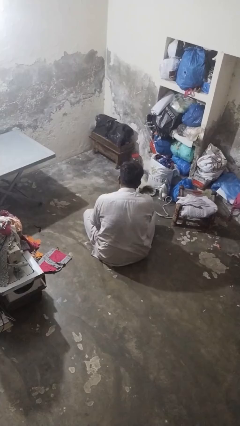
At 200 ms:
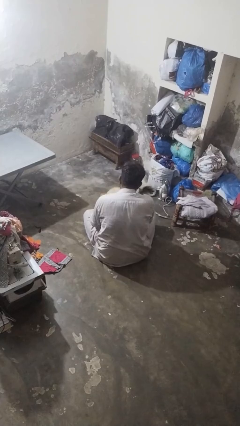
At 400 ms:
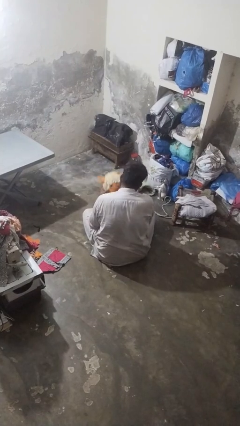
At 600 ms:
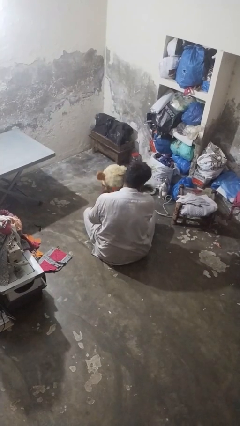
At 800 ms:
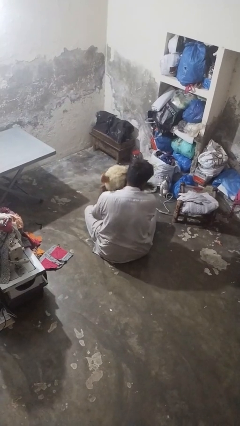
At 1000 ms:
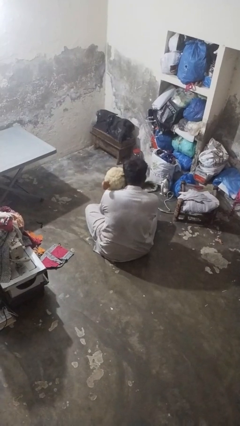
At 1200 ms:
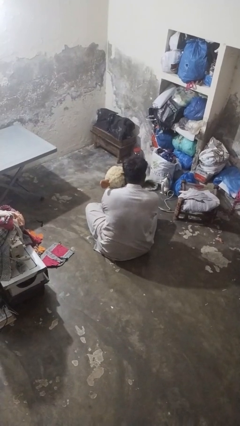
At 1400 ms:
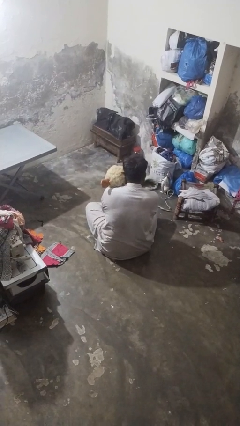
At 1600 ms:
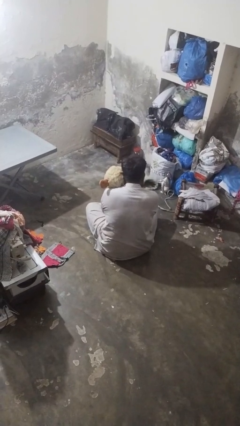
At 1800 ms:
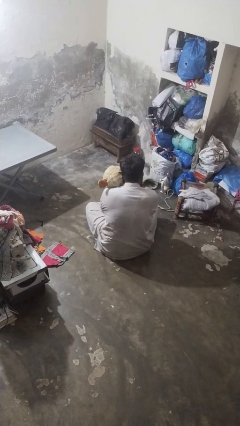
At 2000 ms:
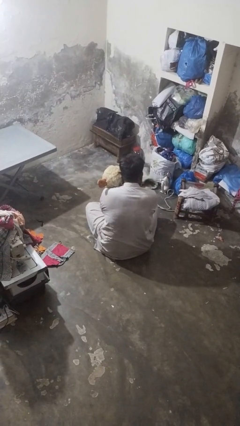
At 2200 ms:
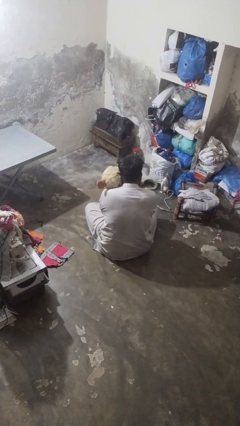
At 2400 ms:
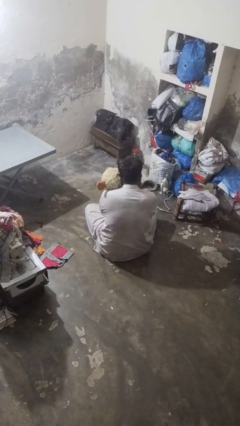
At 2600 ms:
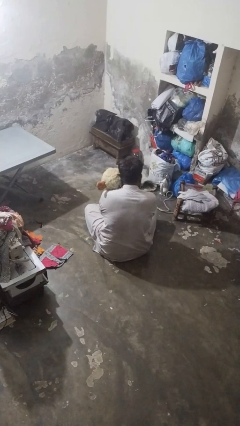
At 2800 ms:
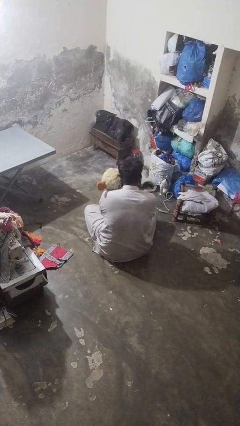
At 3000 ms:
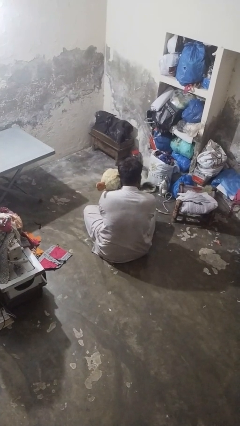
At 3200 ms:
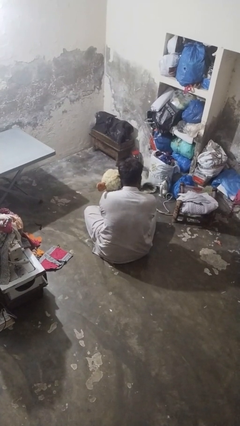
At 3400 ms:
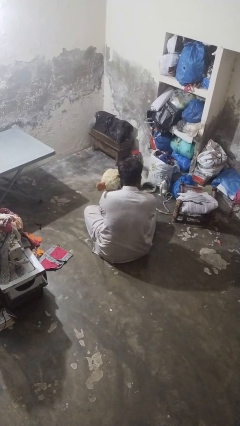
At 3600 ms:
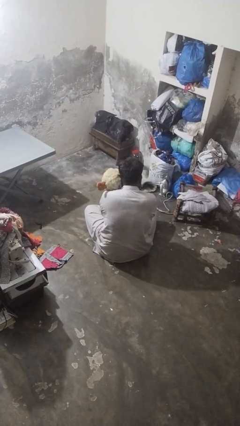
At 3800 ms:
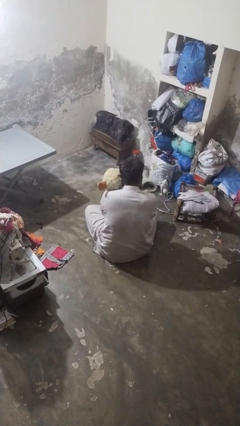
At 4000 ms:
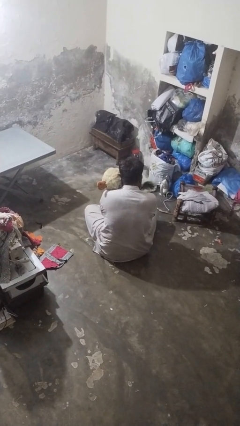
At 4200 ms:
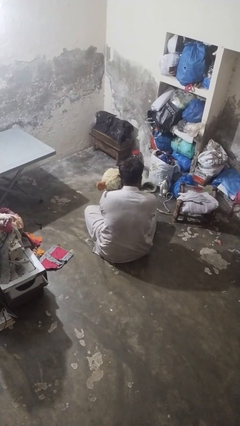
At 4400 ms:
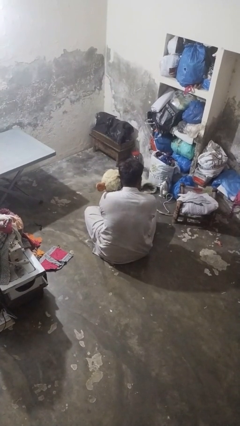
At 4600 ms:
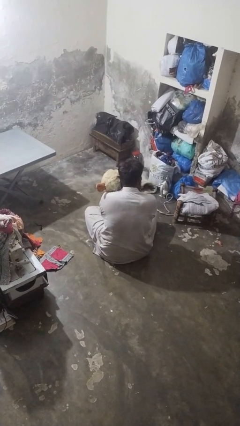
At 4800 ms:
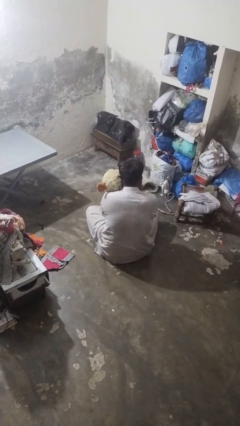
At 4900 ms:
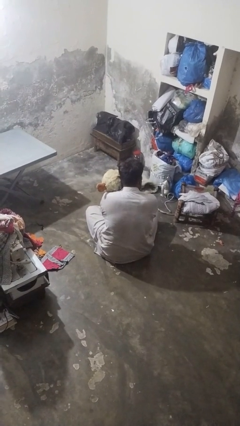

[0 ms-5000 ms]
person hugs stuffed animal

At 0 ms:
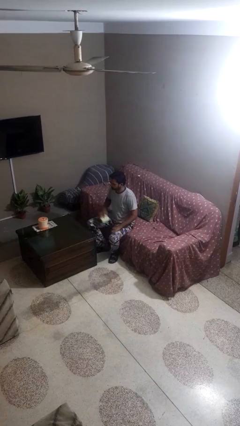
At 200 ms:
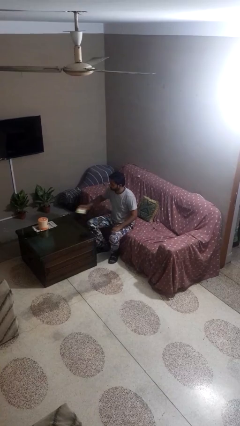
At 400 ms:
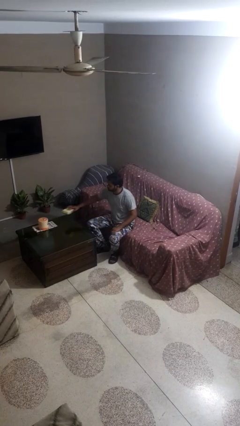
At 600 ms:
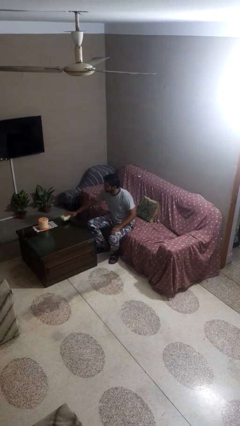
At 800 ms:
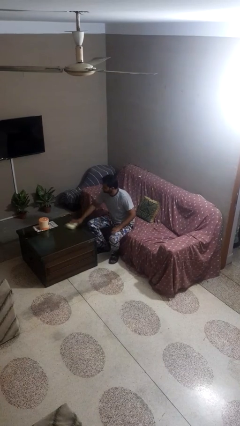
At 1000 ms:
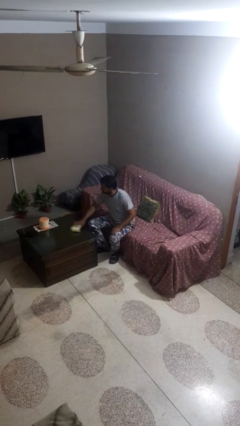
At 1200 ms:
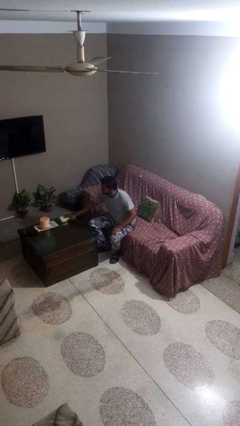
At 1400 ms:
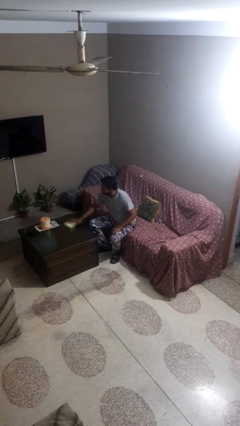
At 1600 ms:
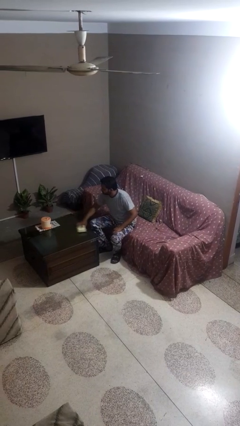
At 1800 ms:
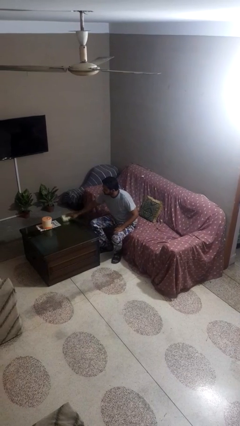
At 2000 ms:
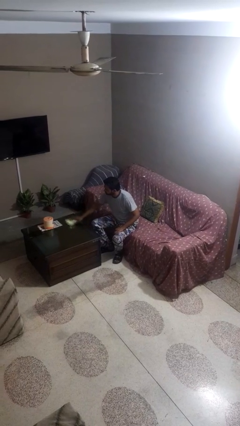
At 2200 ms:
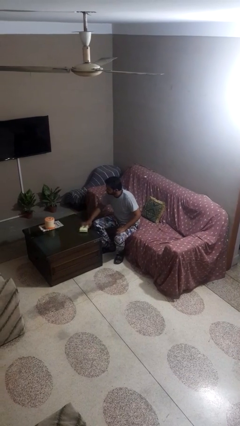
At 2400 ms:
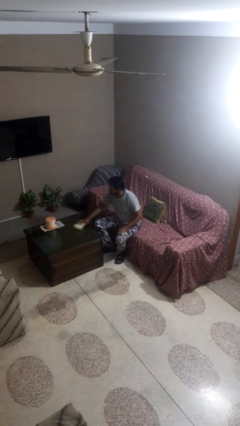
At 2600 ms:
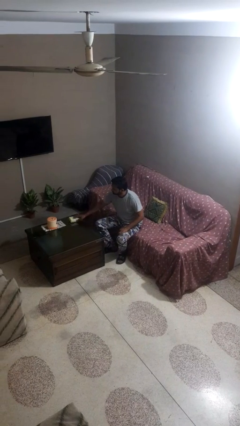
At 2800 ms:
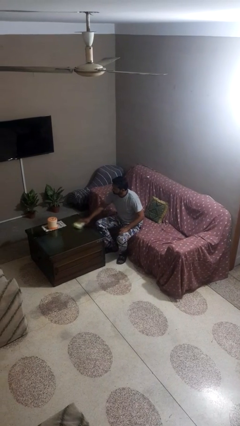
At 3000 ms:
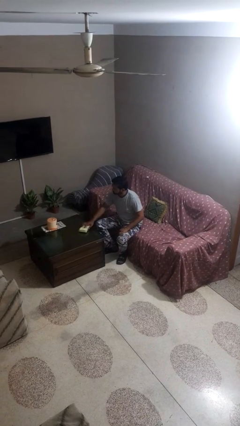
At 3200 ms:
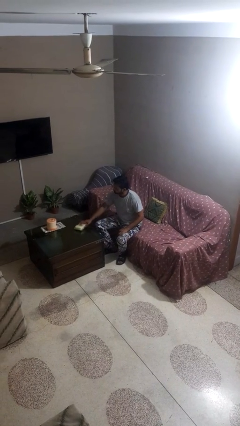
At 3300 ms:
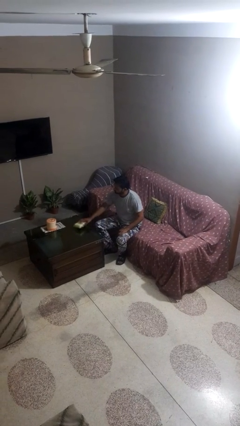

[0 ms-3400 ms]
person dusts furniture

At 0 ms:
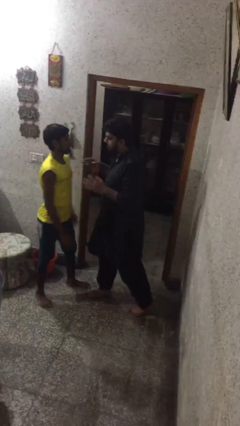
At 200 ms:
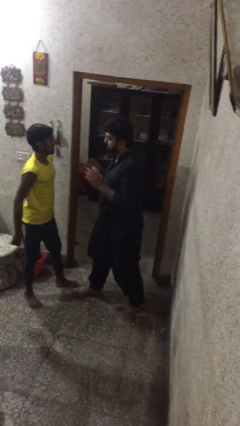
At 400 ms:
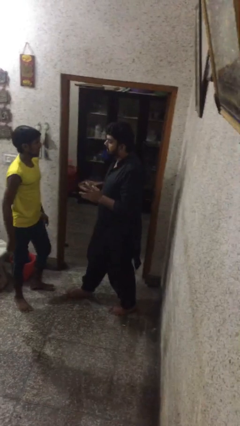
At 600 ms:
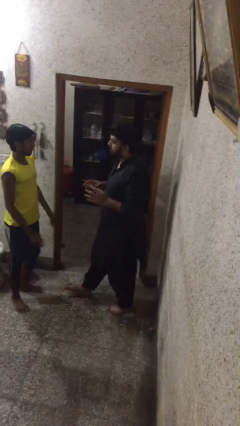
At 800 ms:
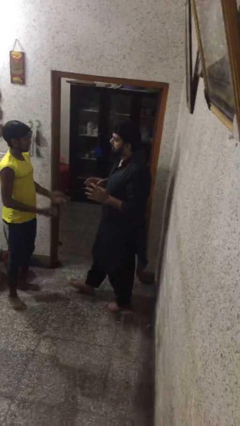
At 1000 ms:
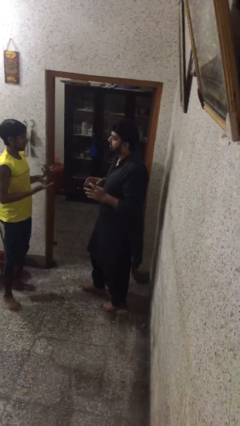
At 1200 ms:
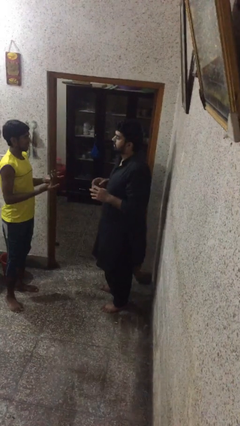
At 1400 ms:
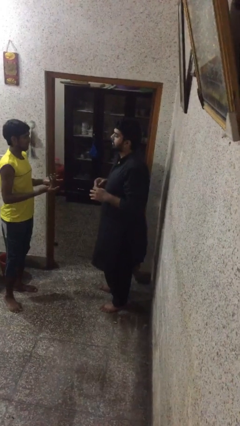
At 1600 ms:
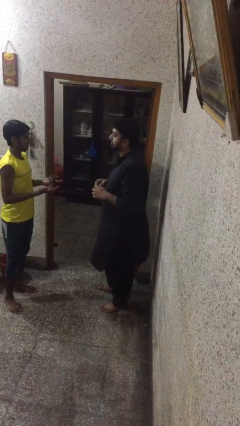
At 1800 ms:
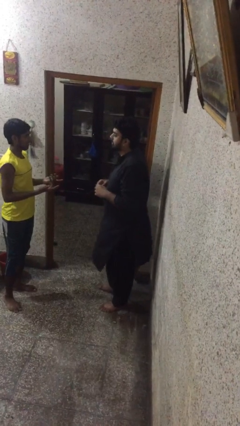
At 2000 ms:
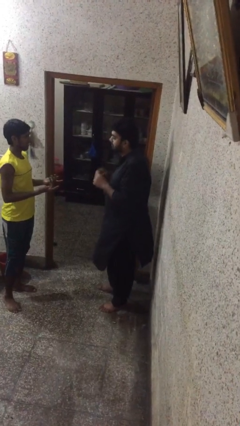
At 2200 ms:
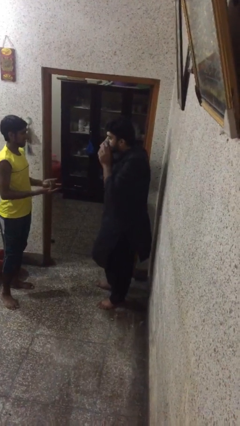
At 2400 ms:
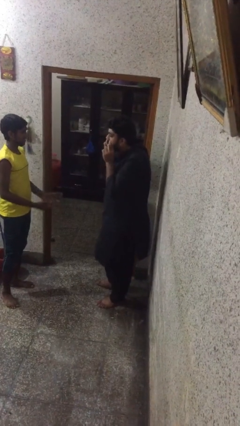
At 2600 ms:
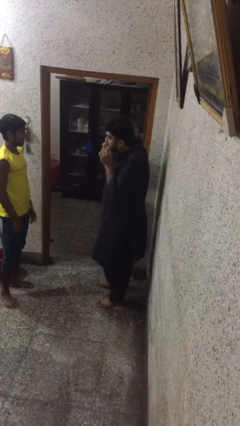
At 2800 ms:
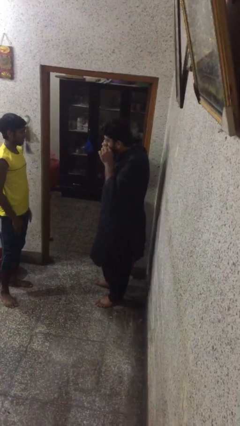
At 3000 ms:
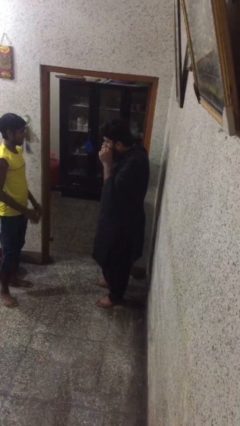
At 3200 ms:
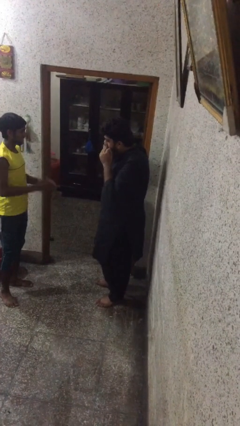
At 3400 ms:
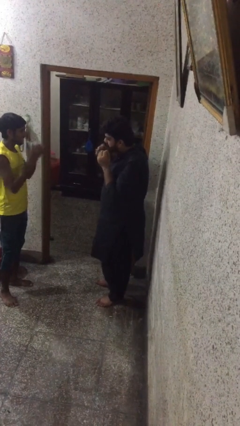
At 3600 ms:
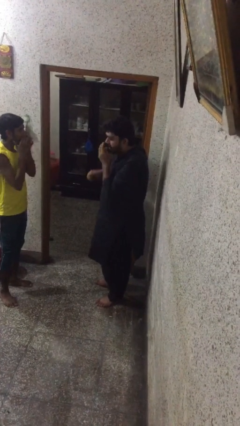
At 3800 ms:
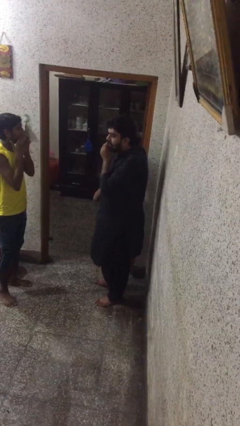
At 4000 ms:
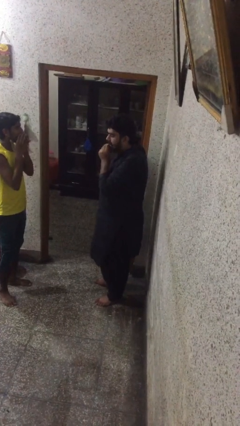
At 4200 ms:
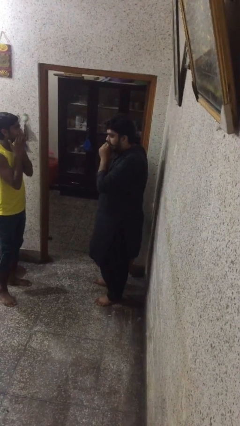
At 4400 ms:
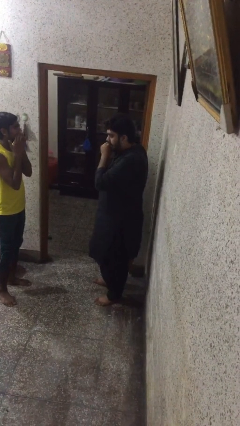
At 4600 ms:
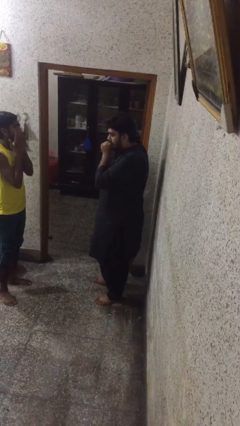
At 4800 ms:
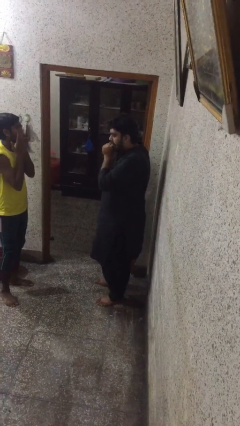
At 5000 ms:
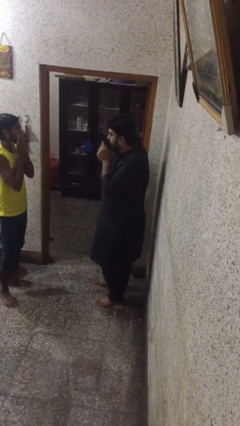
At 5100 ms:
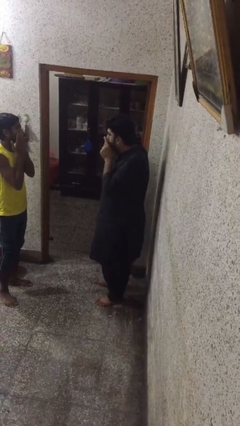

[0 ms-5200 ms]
person talks to person

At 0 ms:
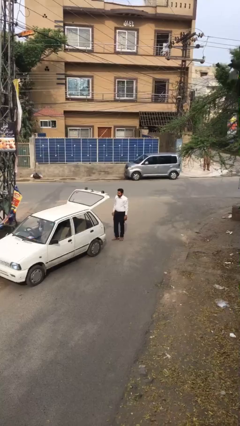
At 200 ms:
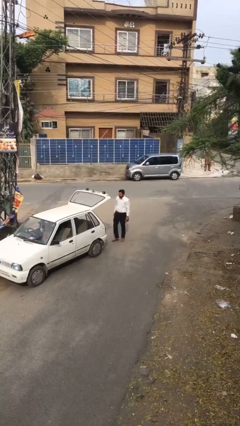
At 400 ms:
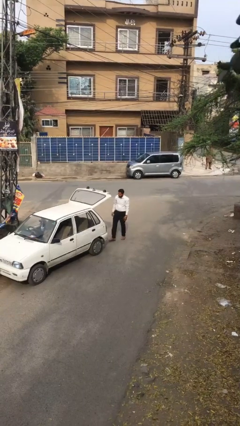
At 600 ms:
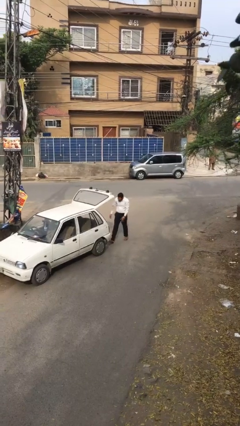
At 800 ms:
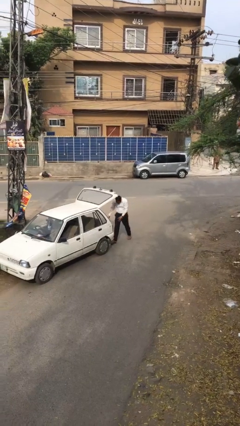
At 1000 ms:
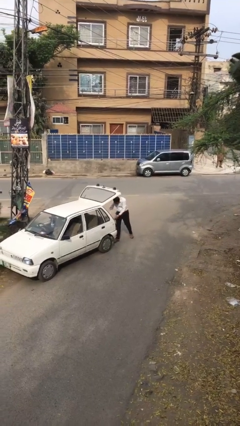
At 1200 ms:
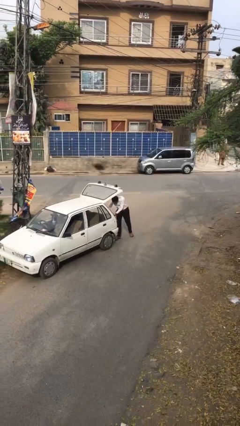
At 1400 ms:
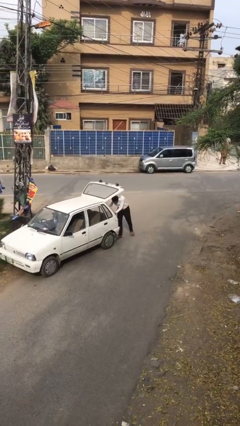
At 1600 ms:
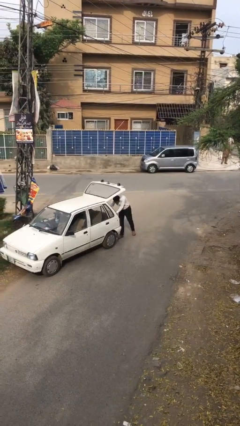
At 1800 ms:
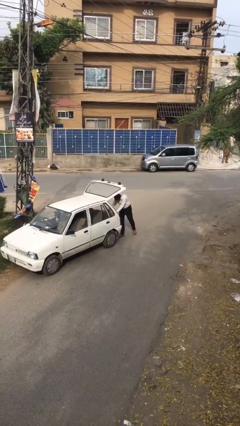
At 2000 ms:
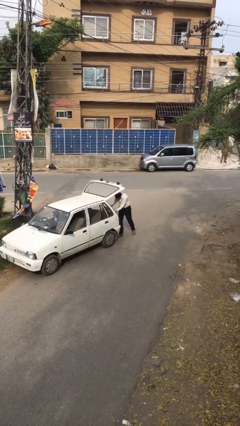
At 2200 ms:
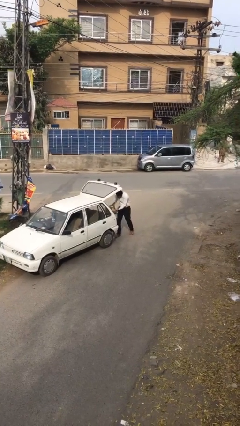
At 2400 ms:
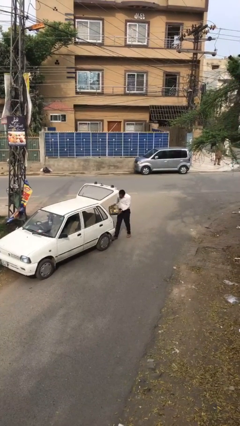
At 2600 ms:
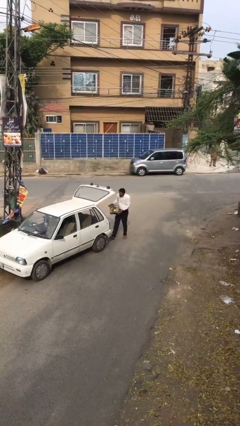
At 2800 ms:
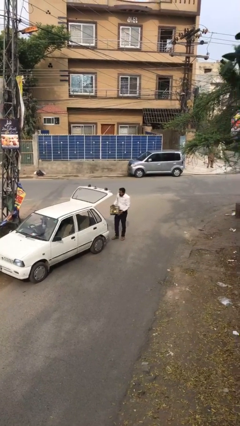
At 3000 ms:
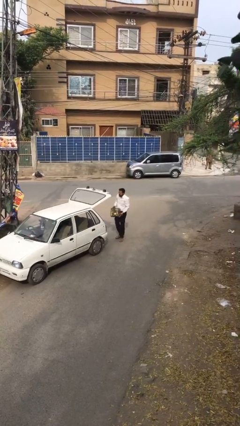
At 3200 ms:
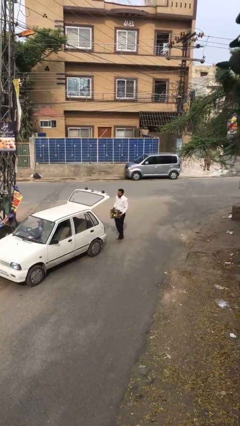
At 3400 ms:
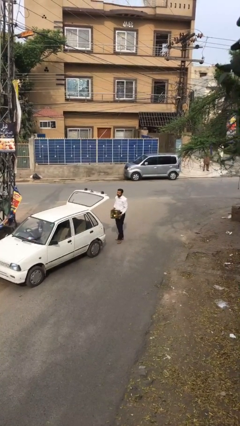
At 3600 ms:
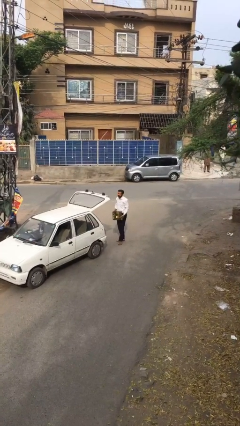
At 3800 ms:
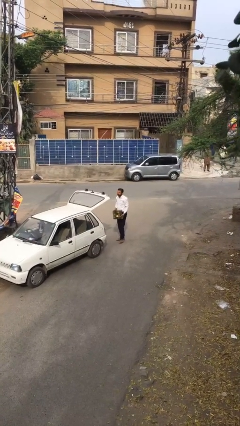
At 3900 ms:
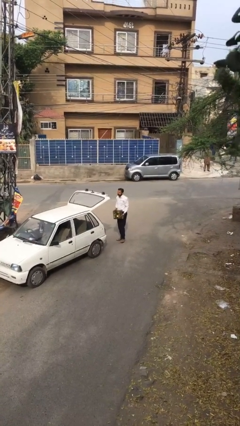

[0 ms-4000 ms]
person unloads car
